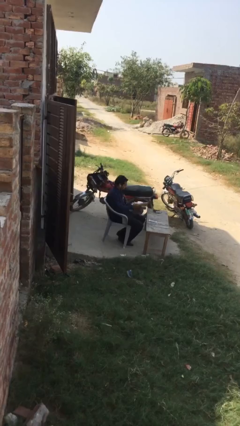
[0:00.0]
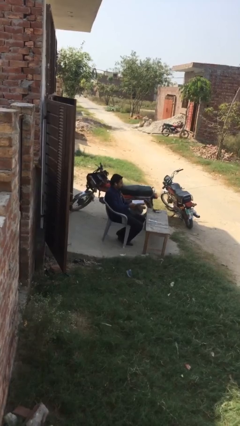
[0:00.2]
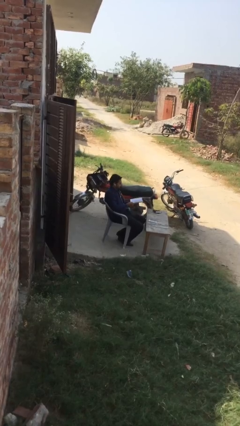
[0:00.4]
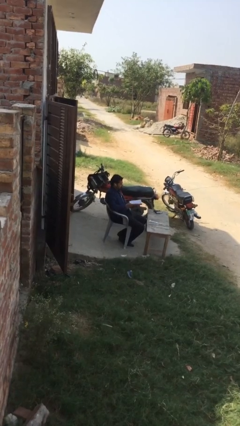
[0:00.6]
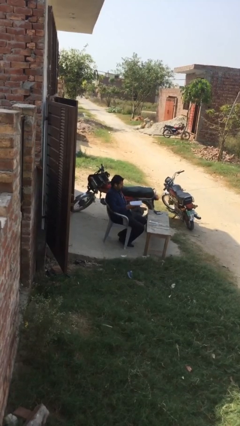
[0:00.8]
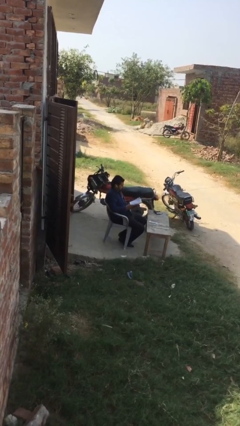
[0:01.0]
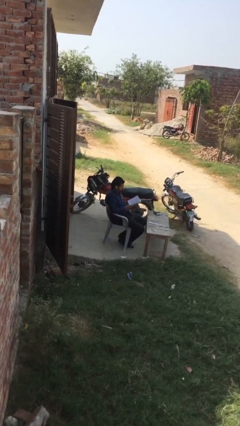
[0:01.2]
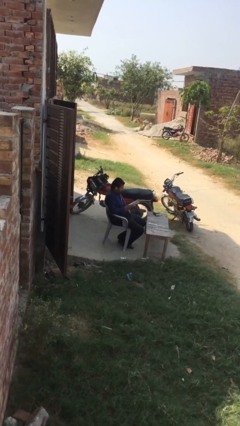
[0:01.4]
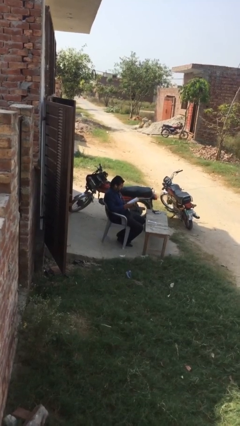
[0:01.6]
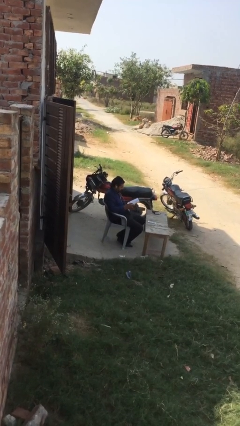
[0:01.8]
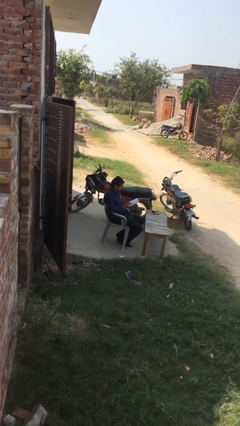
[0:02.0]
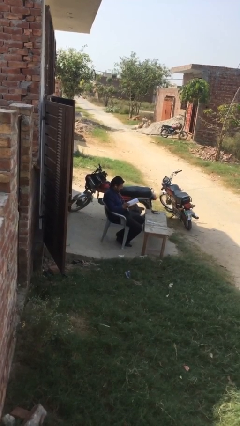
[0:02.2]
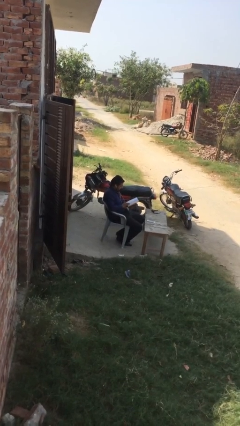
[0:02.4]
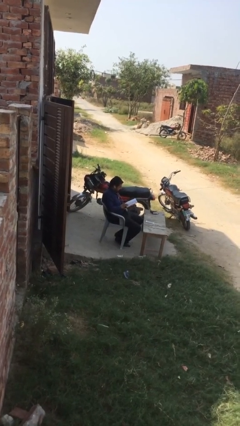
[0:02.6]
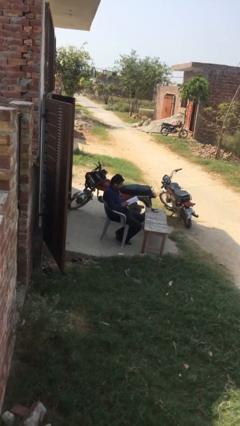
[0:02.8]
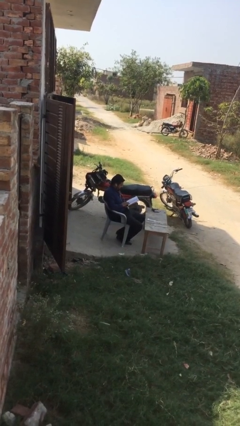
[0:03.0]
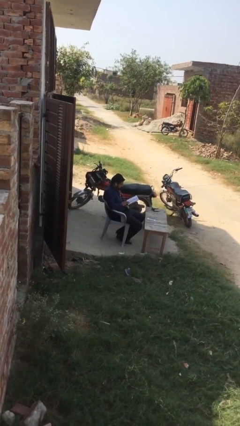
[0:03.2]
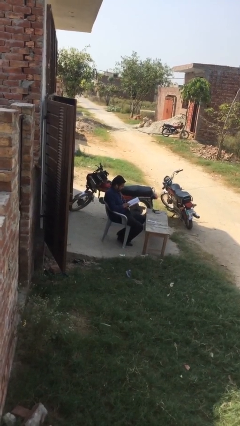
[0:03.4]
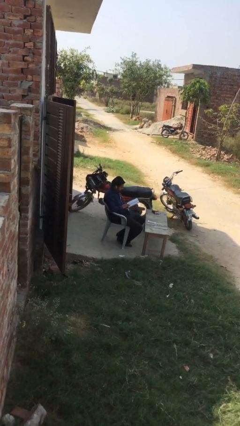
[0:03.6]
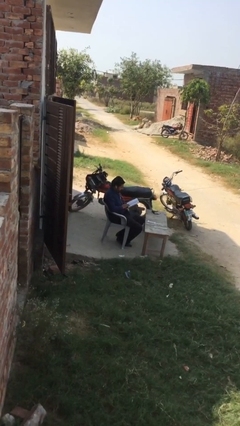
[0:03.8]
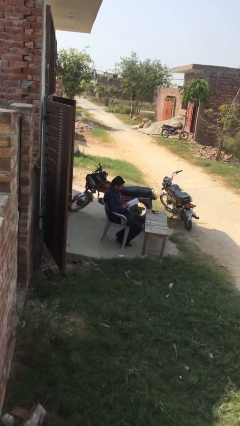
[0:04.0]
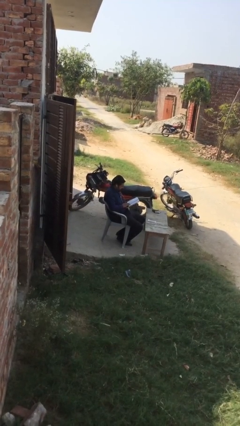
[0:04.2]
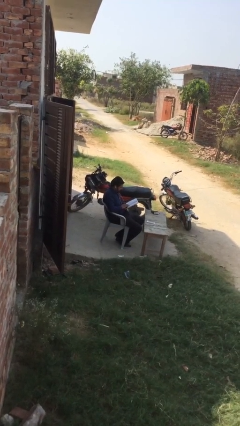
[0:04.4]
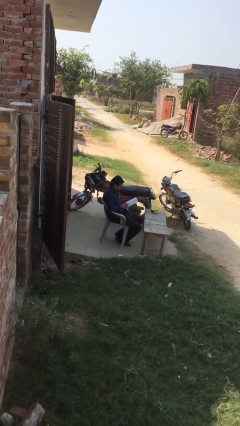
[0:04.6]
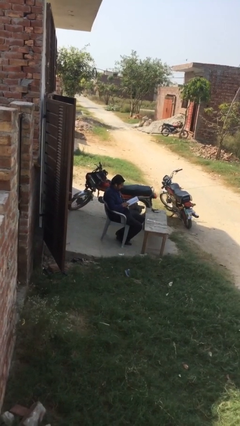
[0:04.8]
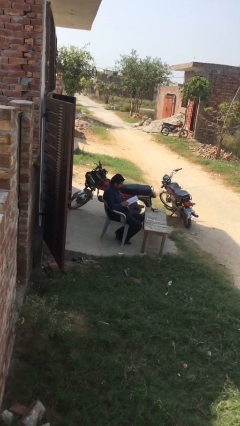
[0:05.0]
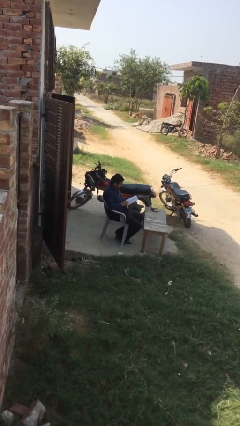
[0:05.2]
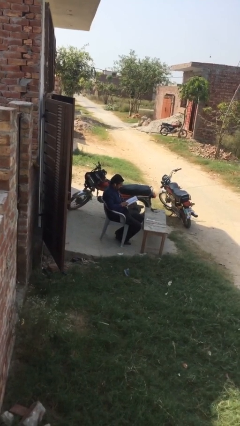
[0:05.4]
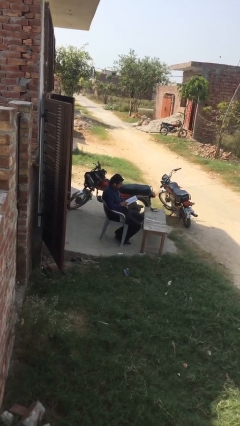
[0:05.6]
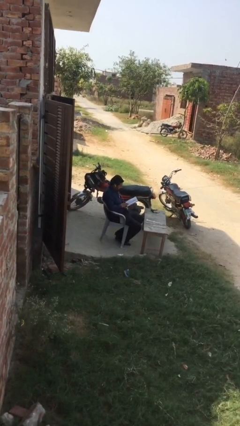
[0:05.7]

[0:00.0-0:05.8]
person reads document

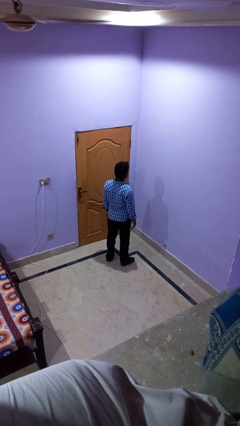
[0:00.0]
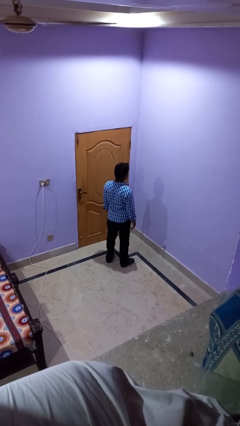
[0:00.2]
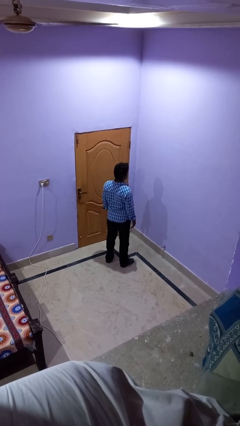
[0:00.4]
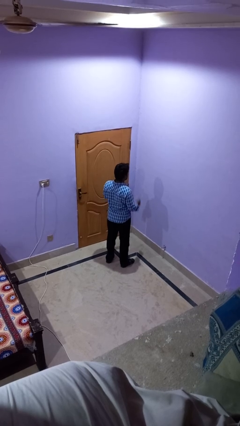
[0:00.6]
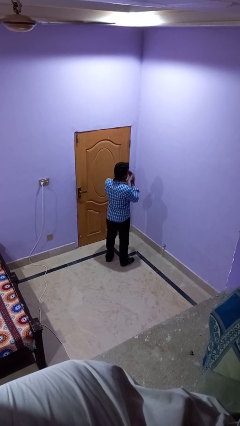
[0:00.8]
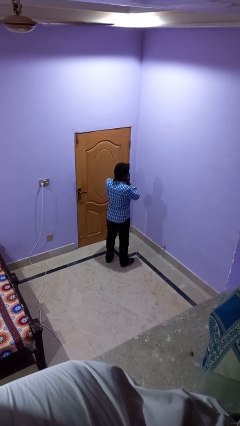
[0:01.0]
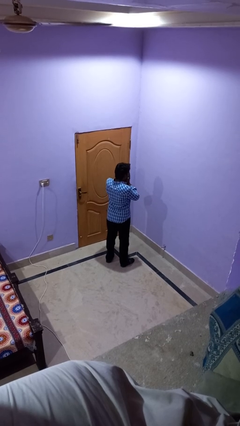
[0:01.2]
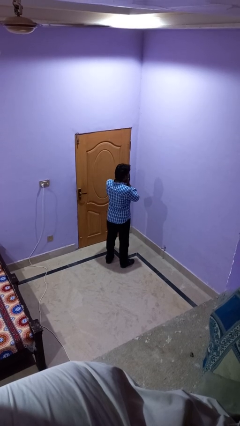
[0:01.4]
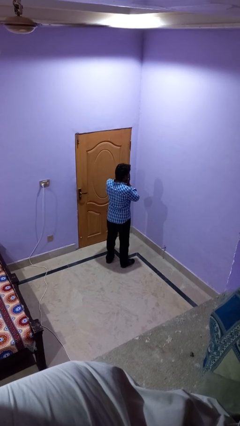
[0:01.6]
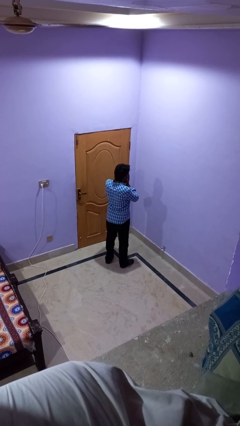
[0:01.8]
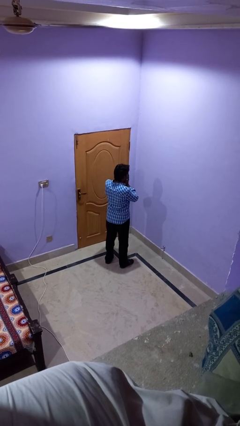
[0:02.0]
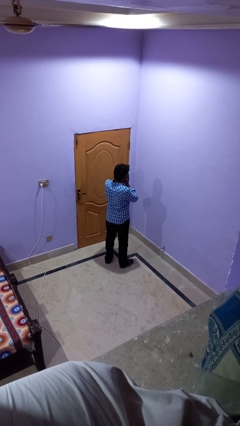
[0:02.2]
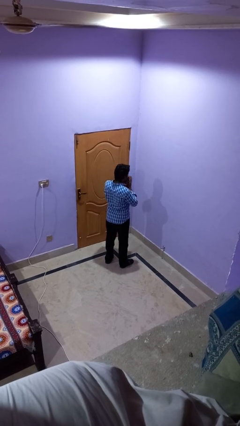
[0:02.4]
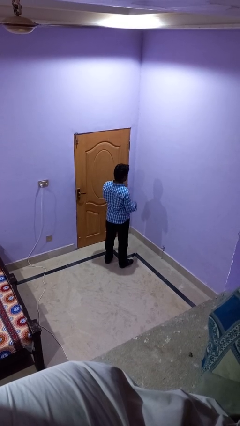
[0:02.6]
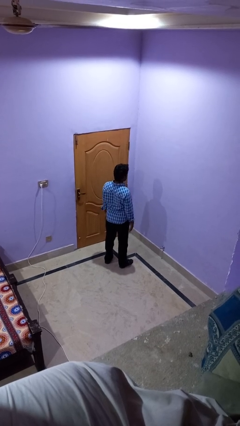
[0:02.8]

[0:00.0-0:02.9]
person sneezes into hand

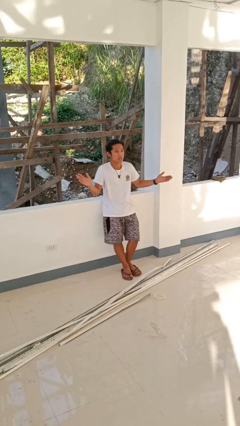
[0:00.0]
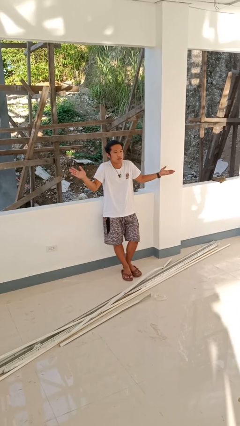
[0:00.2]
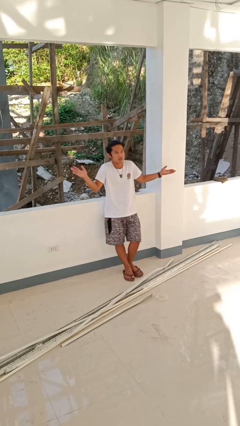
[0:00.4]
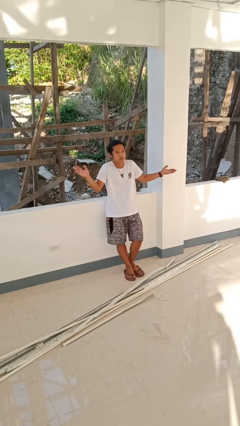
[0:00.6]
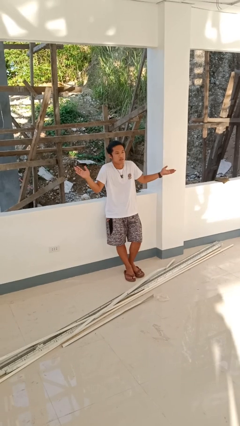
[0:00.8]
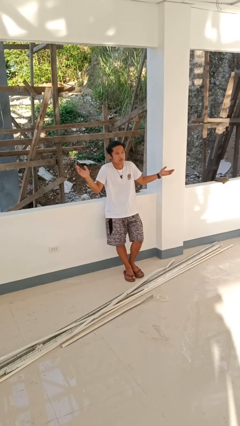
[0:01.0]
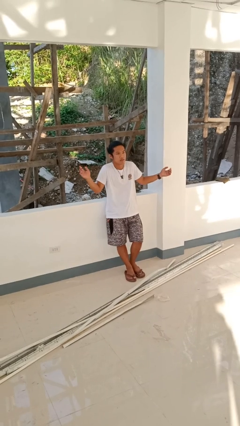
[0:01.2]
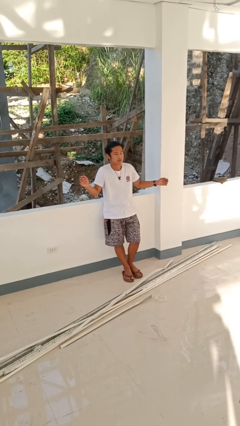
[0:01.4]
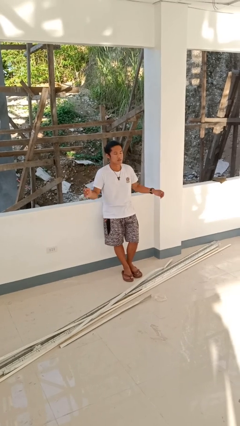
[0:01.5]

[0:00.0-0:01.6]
person shrugs

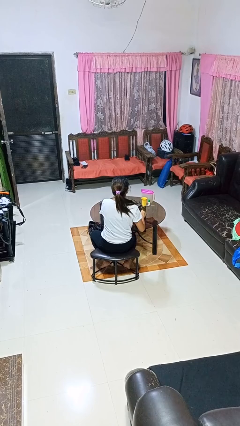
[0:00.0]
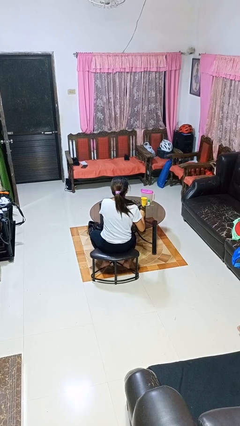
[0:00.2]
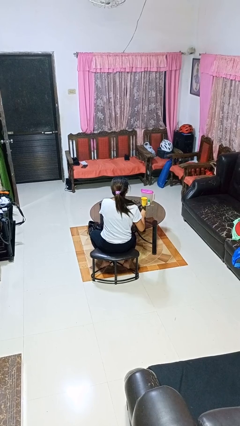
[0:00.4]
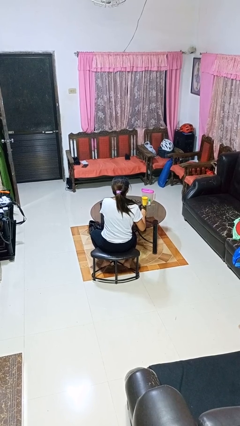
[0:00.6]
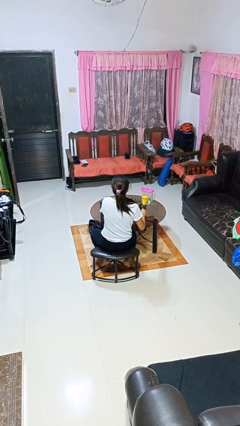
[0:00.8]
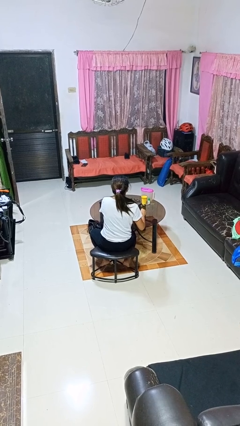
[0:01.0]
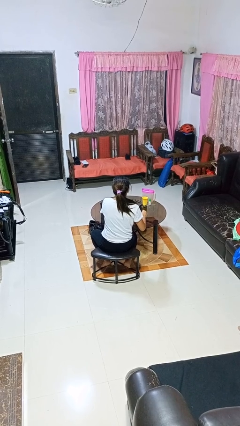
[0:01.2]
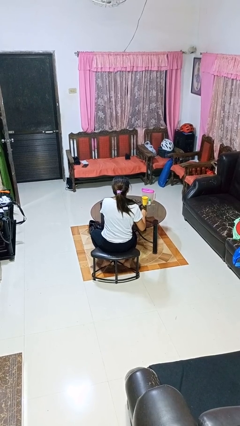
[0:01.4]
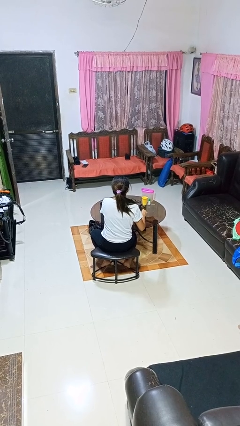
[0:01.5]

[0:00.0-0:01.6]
person stirs mug

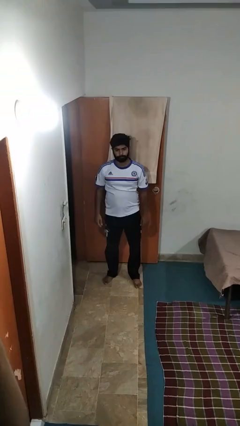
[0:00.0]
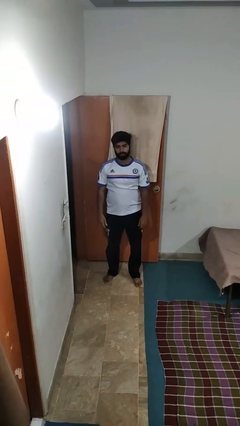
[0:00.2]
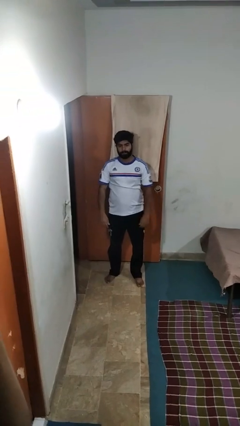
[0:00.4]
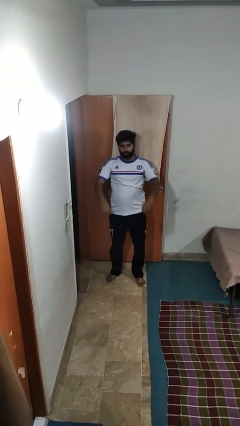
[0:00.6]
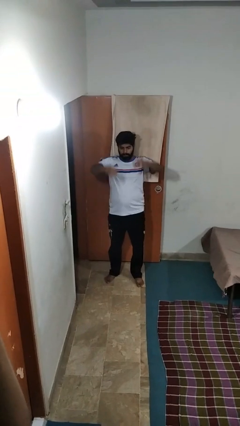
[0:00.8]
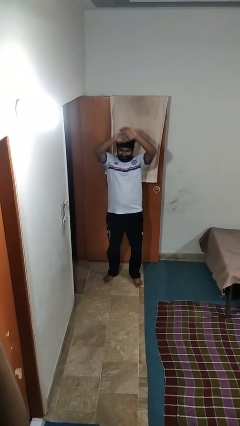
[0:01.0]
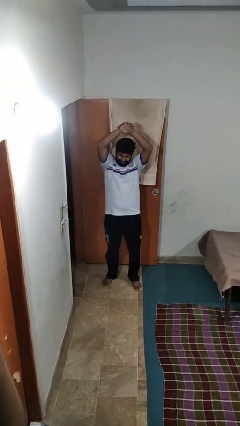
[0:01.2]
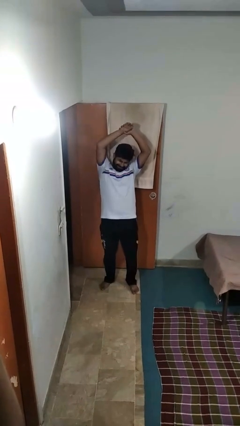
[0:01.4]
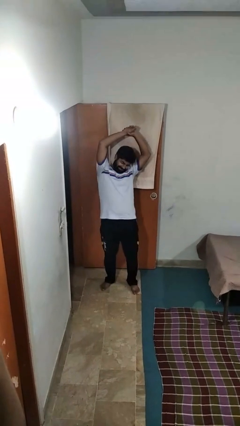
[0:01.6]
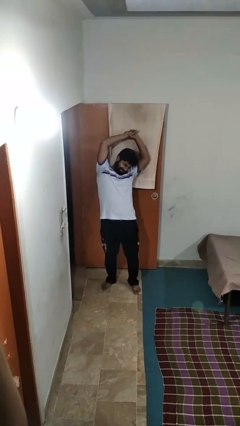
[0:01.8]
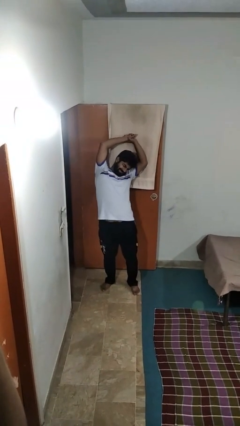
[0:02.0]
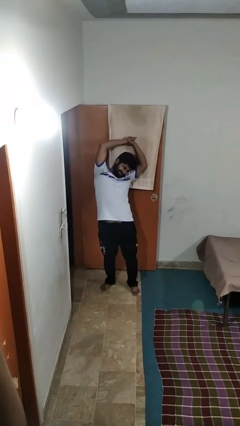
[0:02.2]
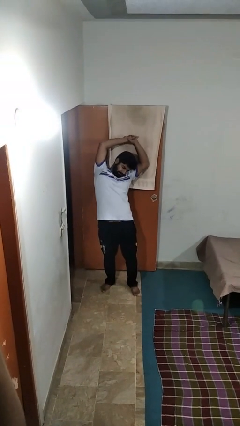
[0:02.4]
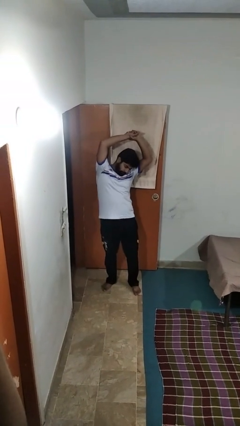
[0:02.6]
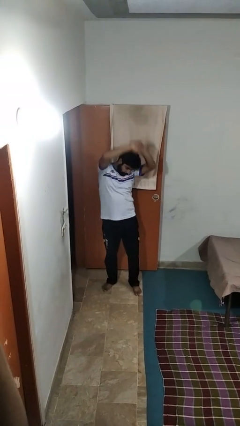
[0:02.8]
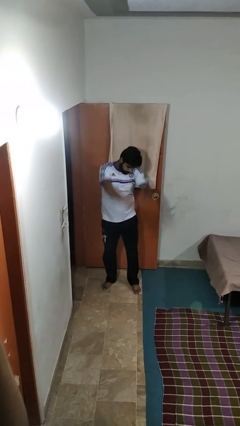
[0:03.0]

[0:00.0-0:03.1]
person stretches arms over head

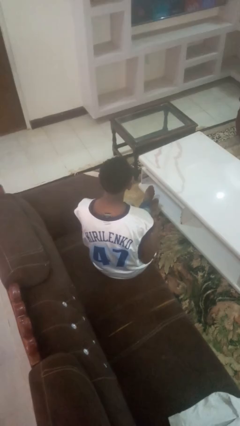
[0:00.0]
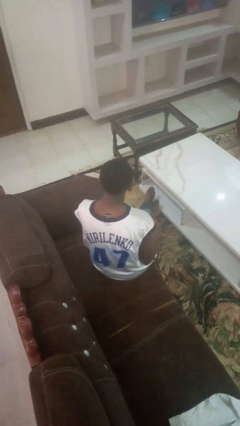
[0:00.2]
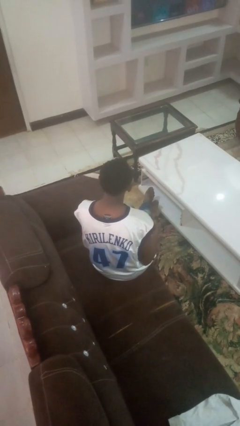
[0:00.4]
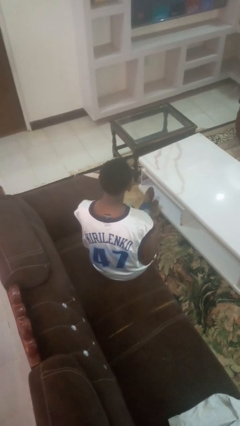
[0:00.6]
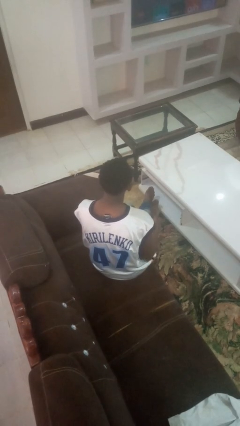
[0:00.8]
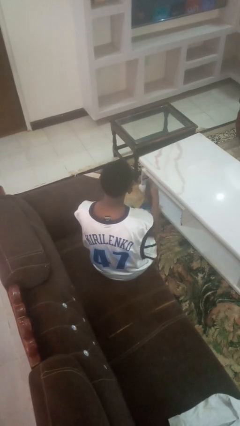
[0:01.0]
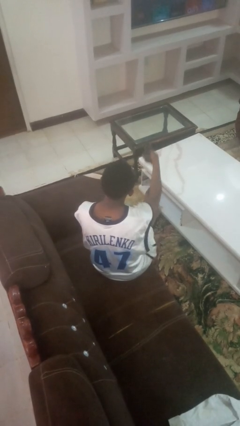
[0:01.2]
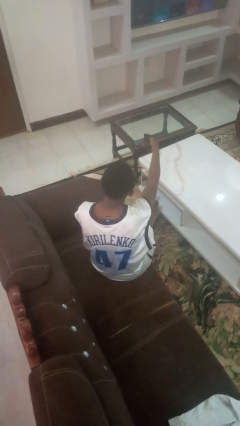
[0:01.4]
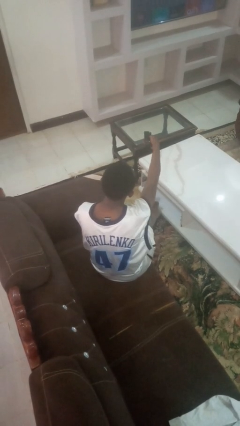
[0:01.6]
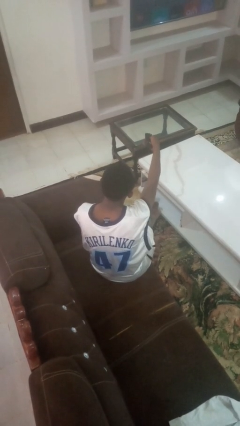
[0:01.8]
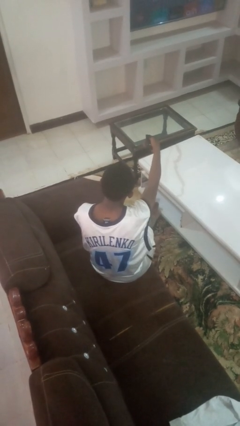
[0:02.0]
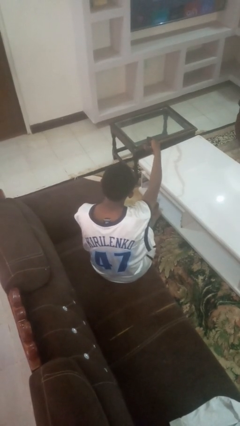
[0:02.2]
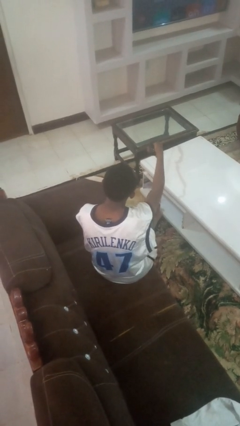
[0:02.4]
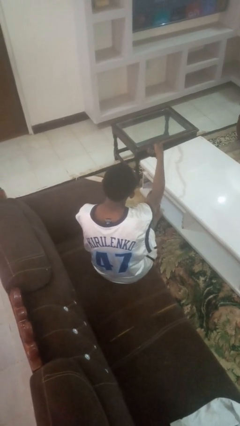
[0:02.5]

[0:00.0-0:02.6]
person uses television remote

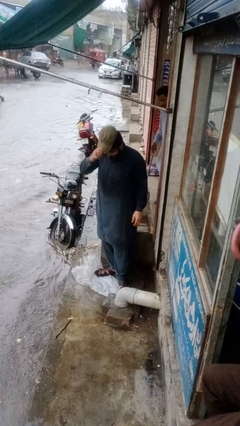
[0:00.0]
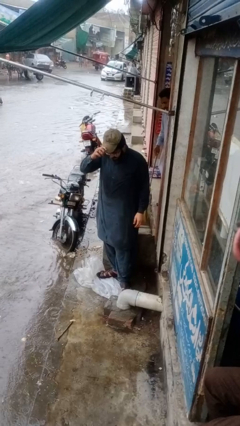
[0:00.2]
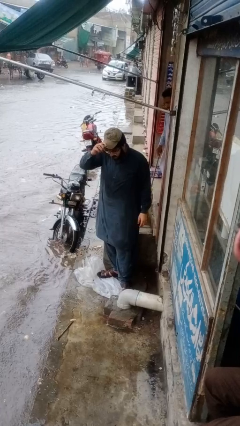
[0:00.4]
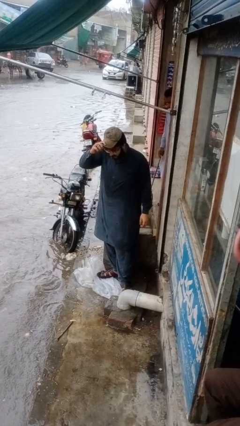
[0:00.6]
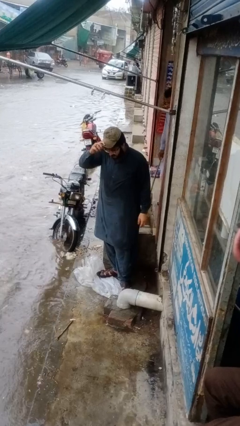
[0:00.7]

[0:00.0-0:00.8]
person puts on hat
